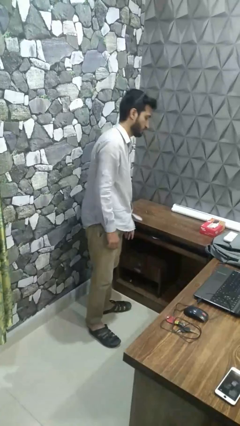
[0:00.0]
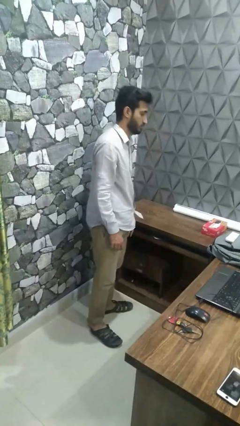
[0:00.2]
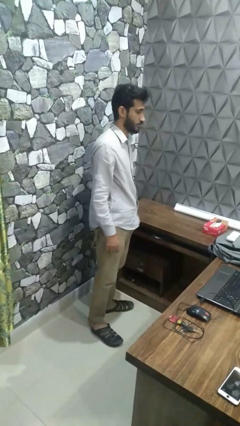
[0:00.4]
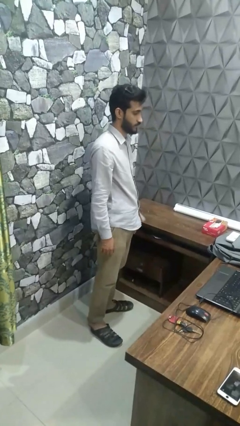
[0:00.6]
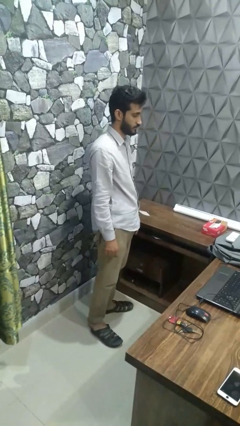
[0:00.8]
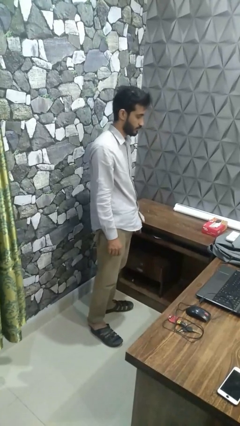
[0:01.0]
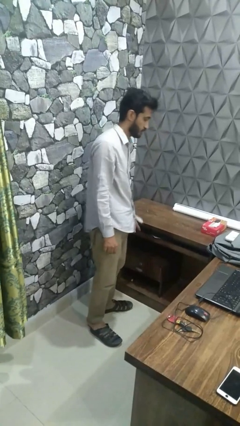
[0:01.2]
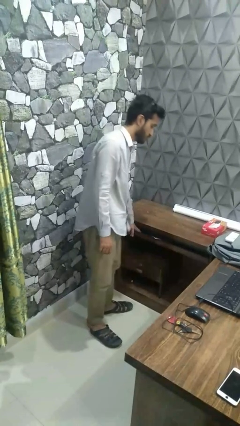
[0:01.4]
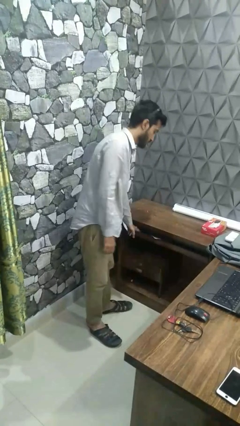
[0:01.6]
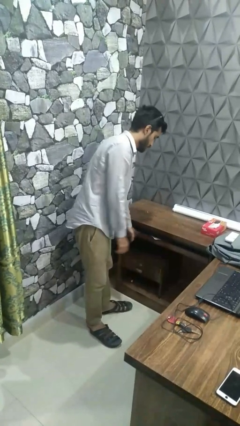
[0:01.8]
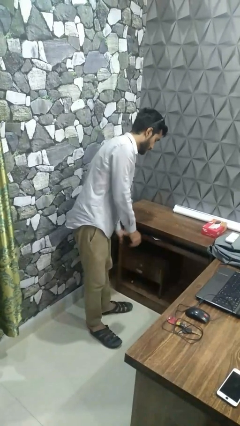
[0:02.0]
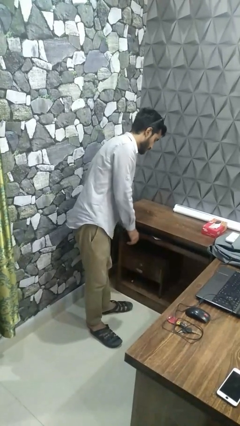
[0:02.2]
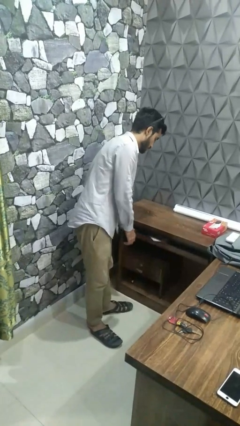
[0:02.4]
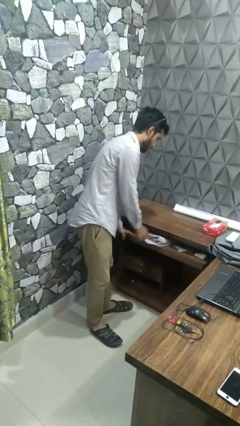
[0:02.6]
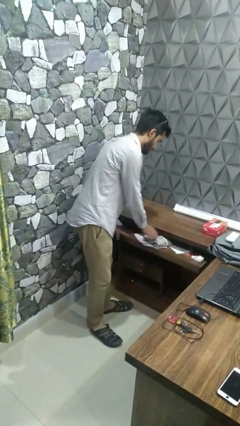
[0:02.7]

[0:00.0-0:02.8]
person takes clothes from dresser

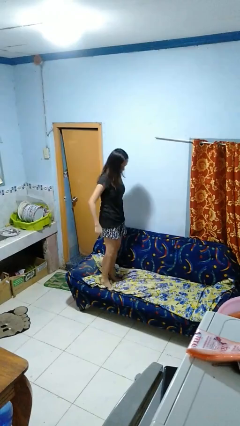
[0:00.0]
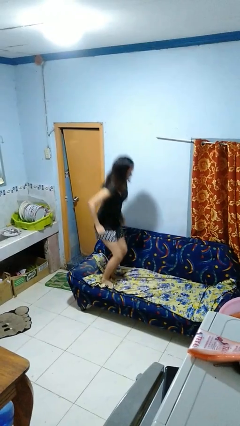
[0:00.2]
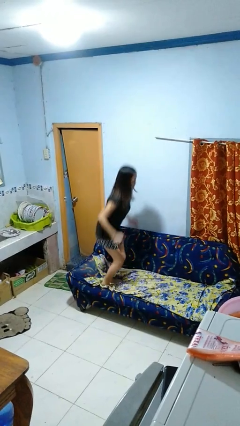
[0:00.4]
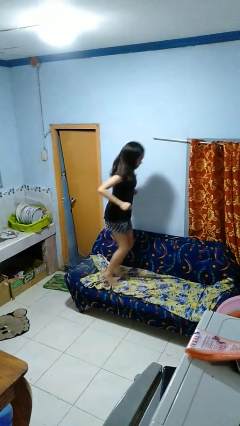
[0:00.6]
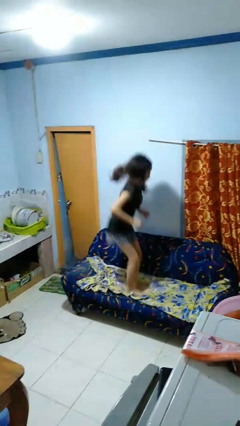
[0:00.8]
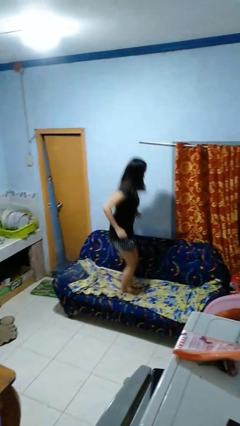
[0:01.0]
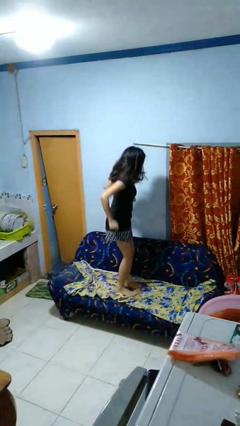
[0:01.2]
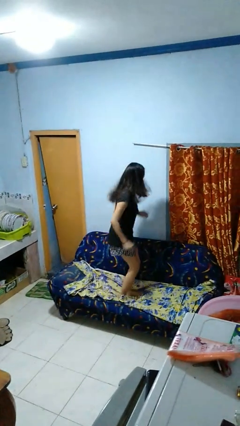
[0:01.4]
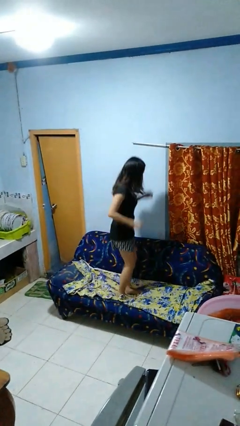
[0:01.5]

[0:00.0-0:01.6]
person jumps on couch

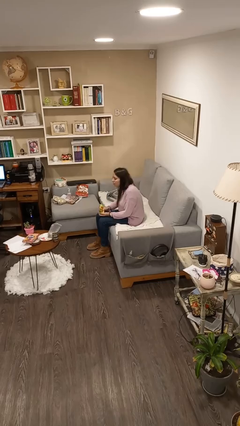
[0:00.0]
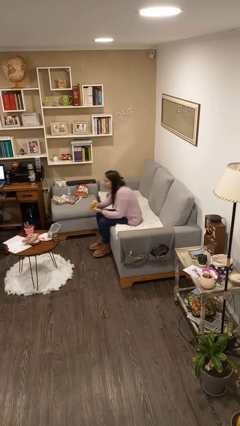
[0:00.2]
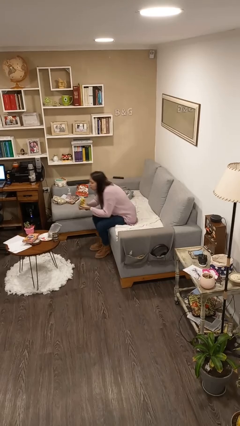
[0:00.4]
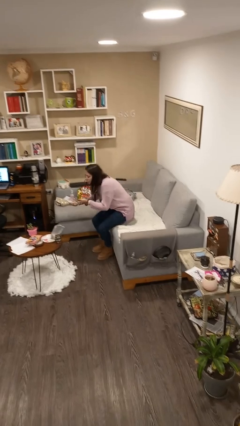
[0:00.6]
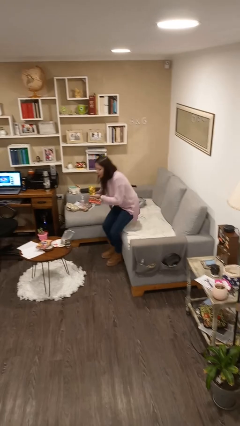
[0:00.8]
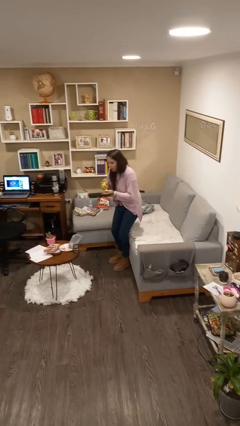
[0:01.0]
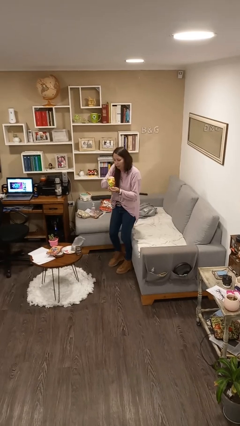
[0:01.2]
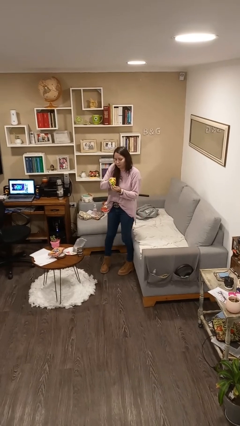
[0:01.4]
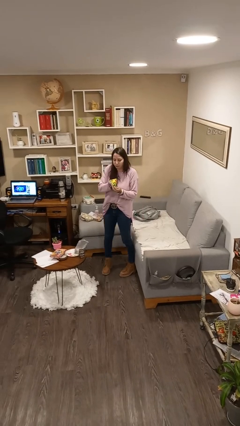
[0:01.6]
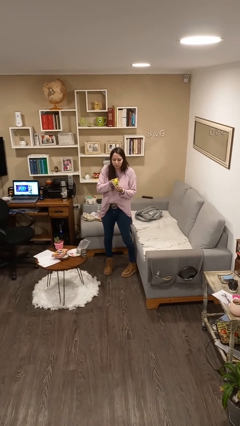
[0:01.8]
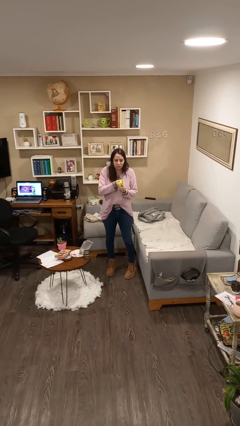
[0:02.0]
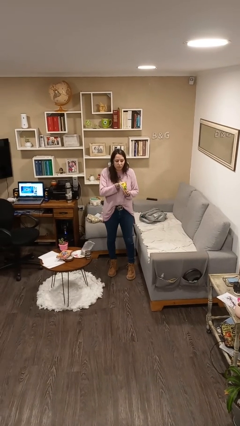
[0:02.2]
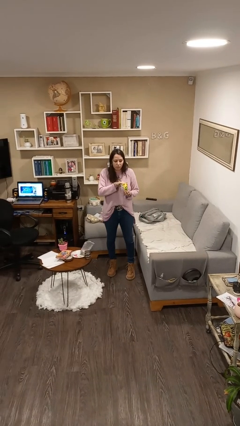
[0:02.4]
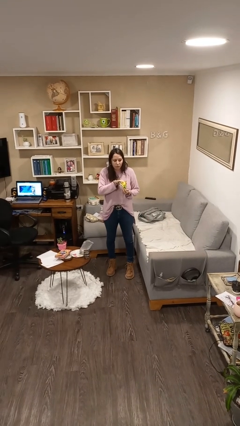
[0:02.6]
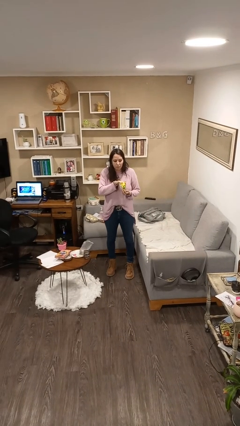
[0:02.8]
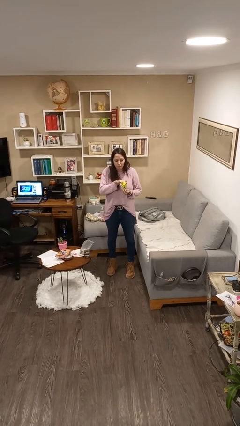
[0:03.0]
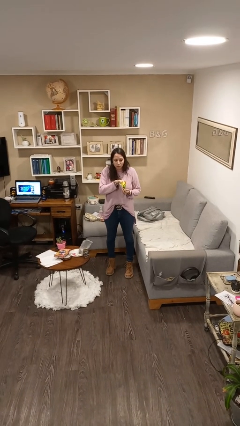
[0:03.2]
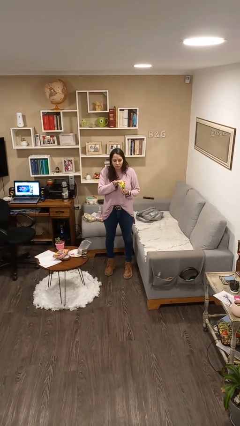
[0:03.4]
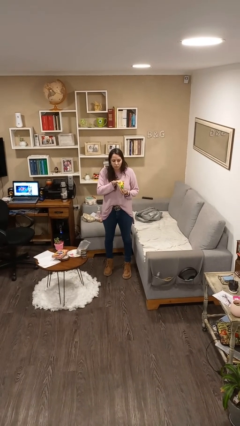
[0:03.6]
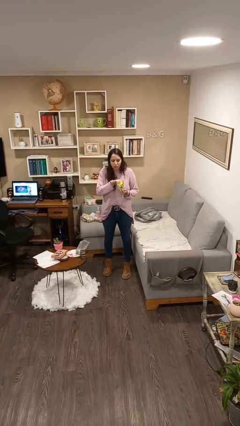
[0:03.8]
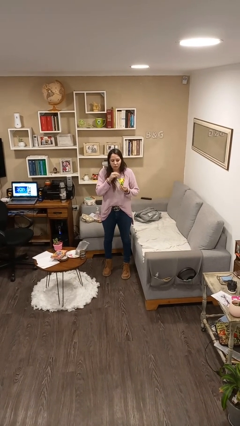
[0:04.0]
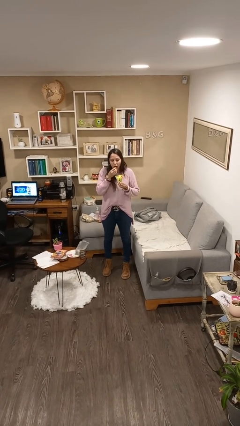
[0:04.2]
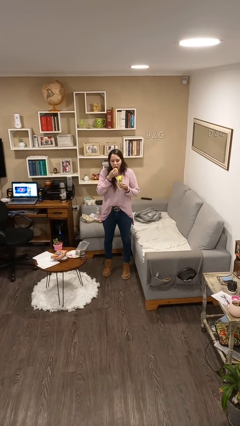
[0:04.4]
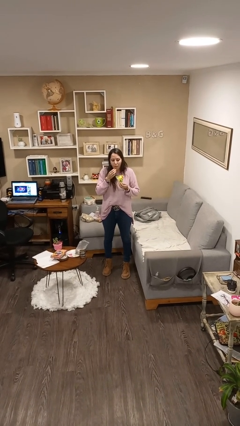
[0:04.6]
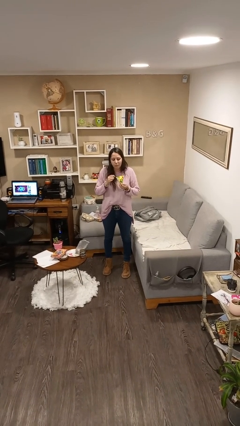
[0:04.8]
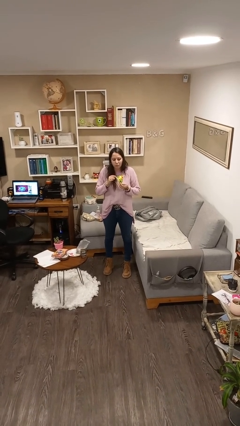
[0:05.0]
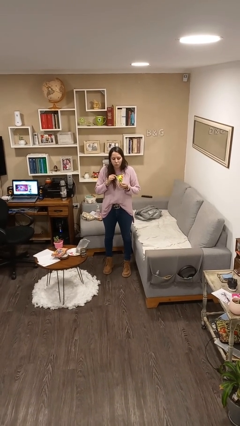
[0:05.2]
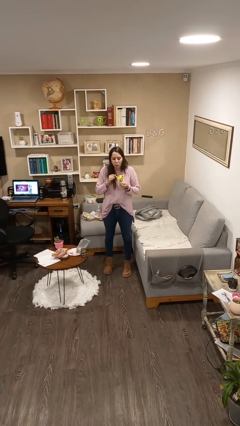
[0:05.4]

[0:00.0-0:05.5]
person eats snack from bag

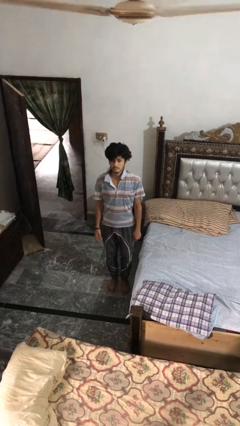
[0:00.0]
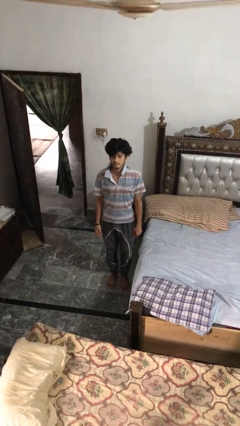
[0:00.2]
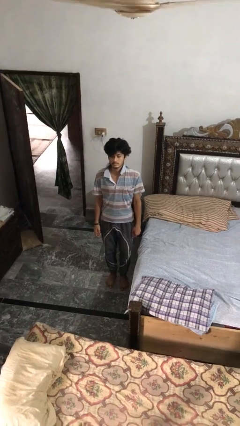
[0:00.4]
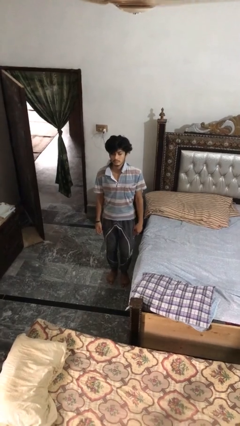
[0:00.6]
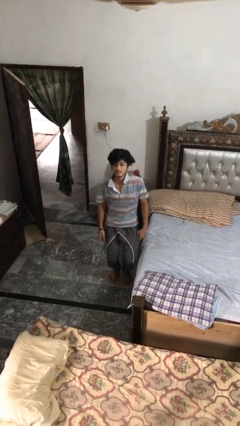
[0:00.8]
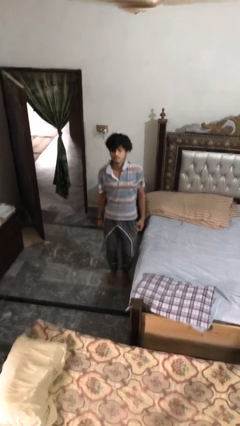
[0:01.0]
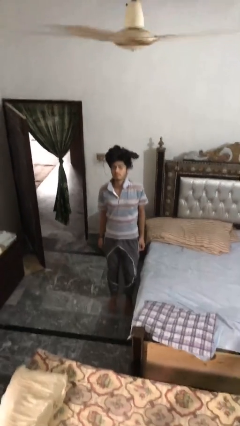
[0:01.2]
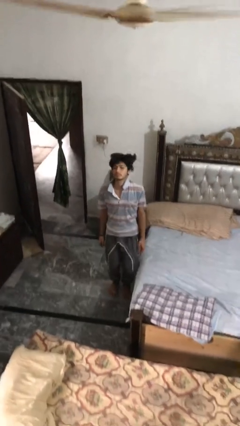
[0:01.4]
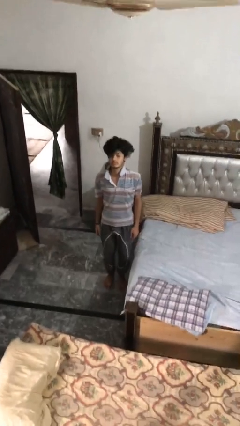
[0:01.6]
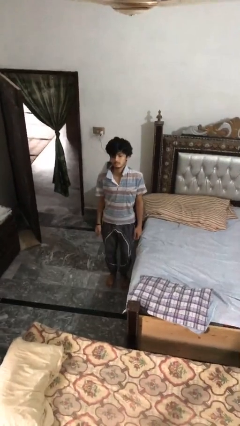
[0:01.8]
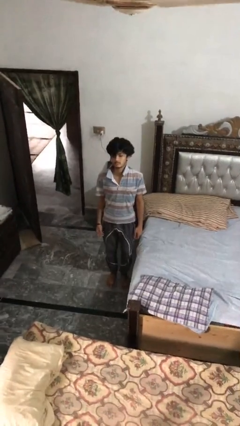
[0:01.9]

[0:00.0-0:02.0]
person jumps

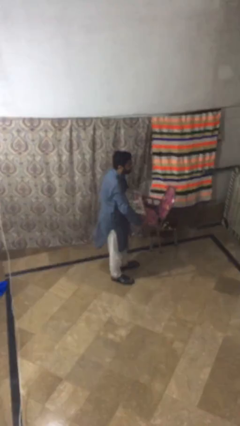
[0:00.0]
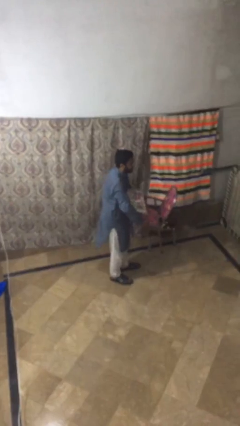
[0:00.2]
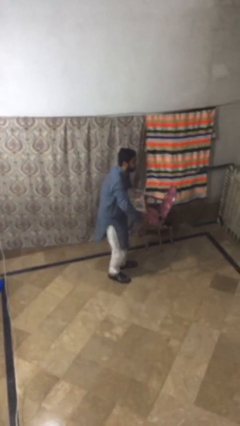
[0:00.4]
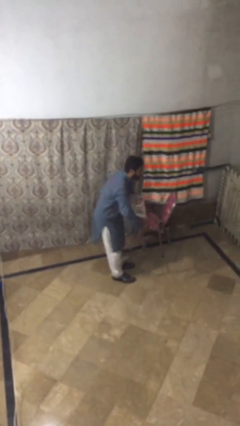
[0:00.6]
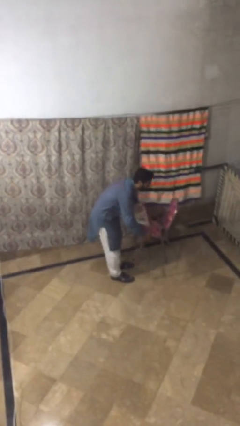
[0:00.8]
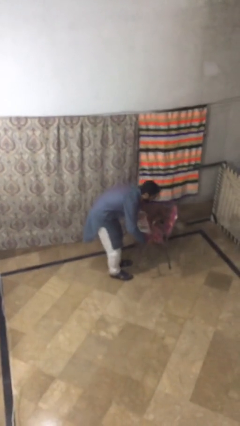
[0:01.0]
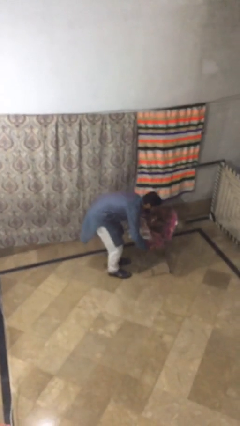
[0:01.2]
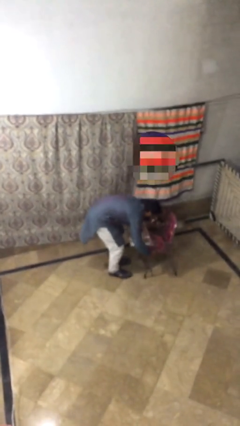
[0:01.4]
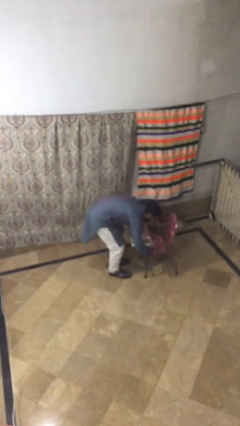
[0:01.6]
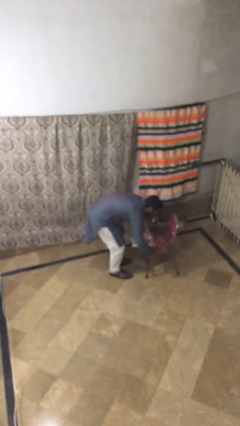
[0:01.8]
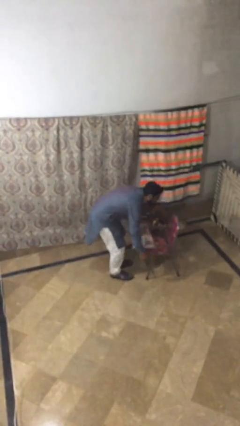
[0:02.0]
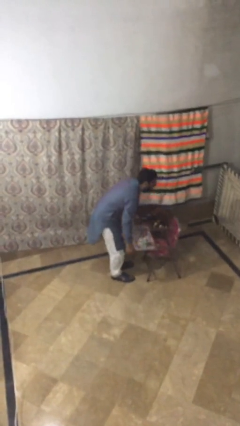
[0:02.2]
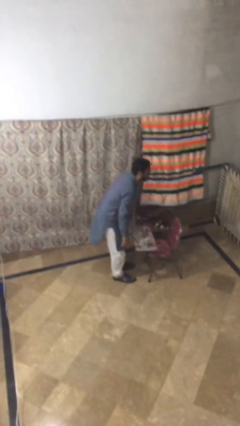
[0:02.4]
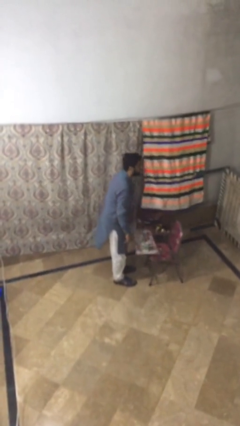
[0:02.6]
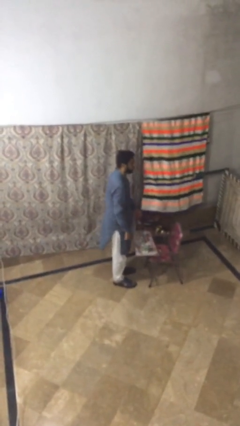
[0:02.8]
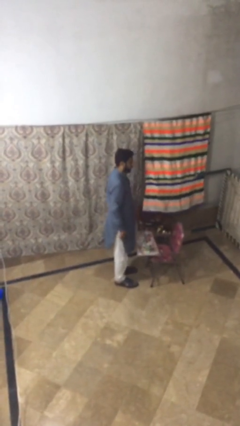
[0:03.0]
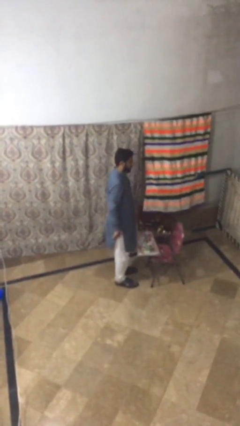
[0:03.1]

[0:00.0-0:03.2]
person puts down object on floor

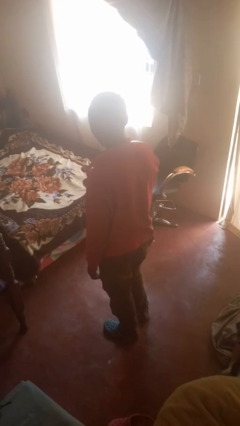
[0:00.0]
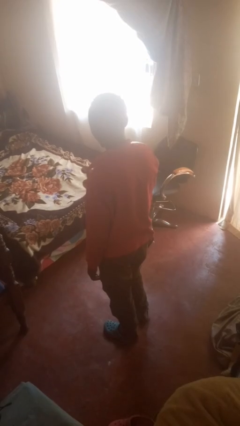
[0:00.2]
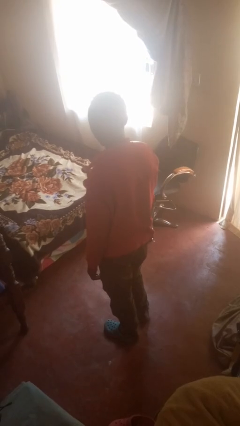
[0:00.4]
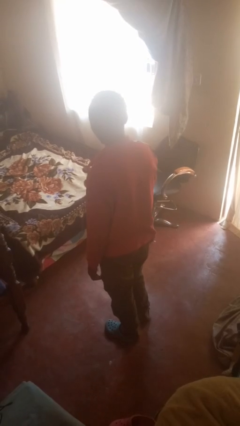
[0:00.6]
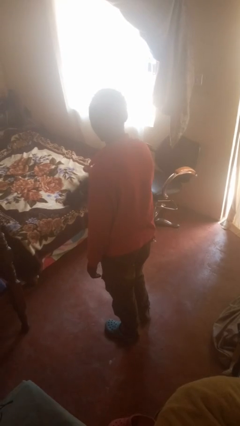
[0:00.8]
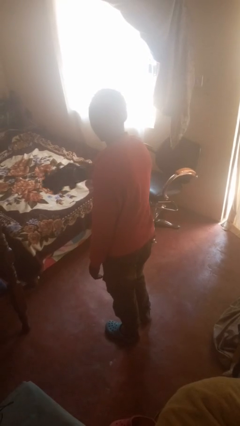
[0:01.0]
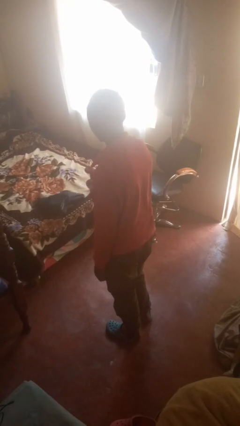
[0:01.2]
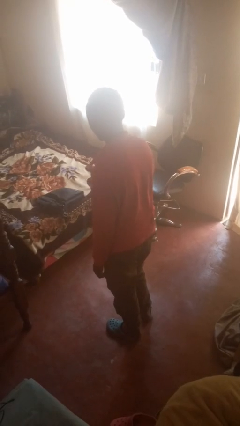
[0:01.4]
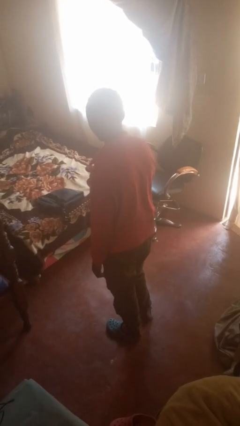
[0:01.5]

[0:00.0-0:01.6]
person throws object on bed

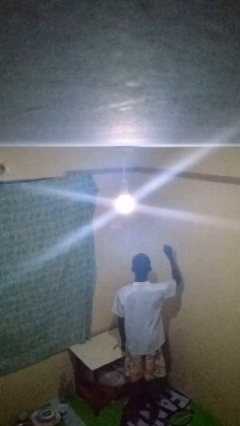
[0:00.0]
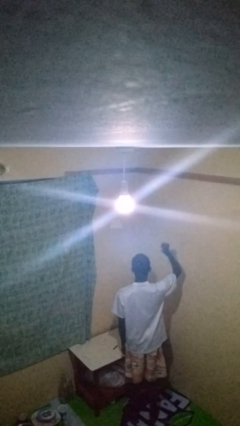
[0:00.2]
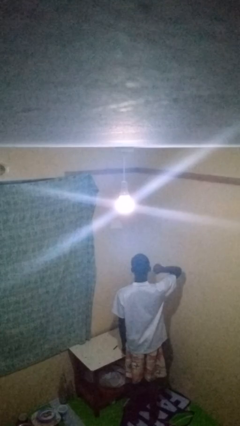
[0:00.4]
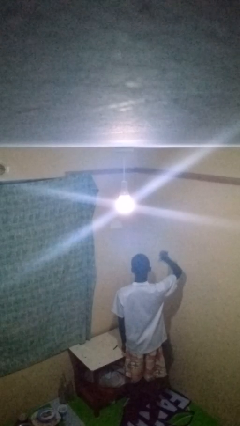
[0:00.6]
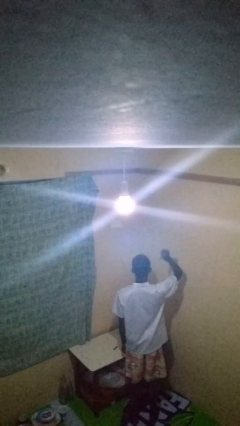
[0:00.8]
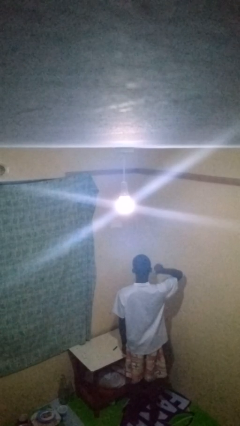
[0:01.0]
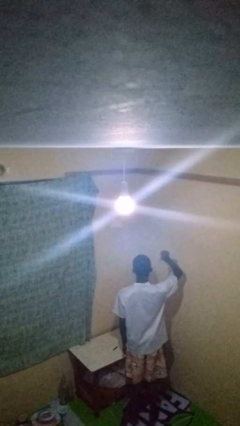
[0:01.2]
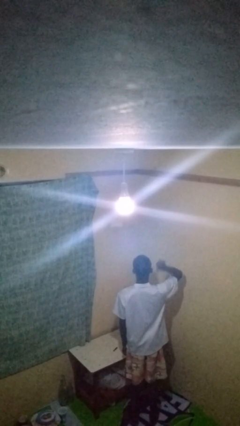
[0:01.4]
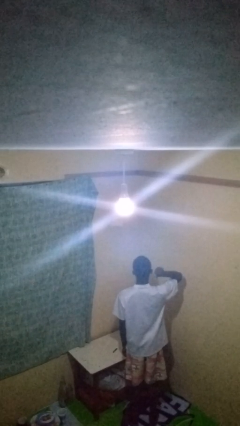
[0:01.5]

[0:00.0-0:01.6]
person gestures behind me
